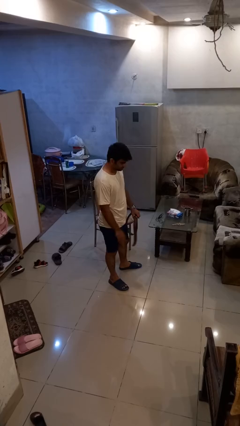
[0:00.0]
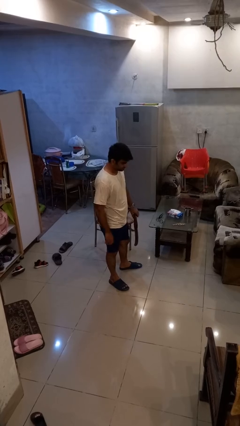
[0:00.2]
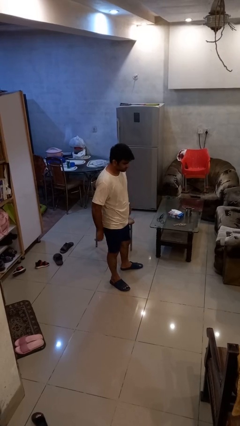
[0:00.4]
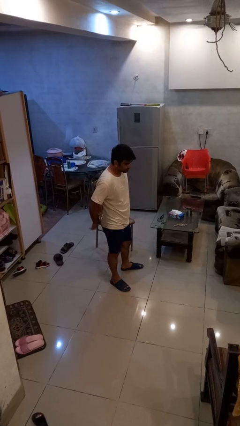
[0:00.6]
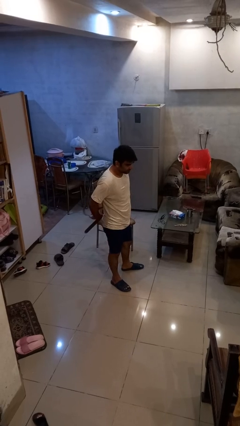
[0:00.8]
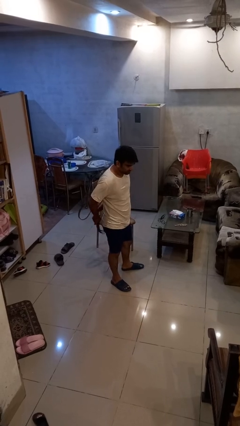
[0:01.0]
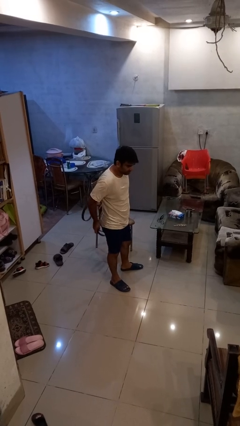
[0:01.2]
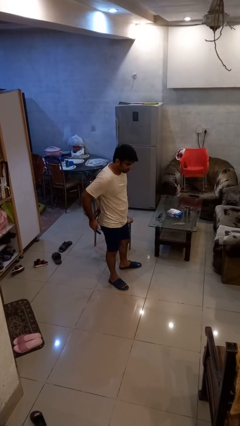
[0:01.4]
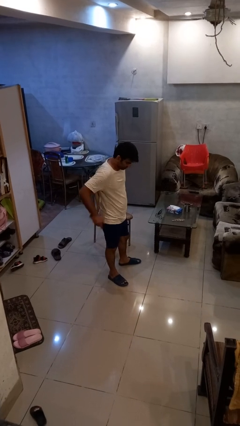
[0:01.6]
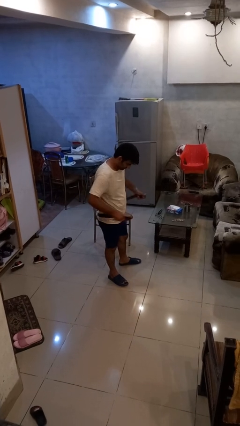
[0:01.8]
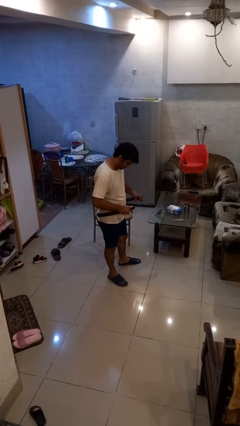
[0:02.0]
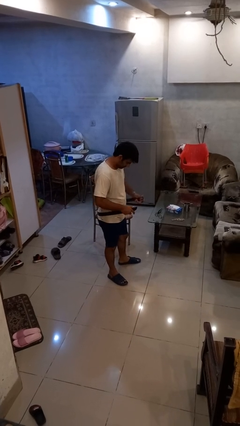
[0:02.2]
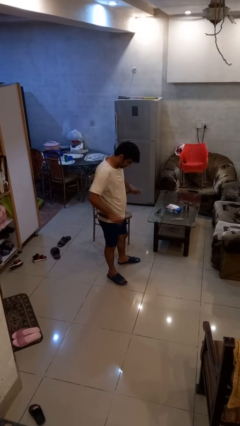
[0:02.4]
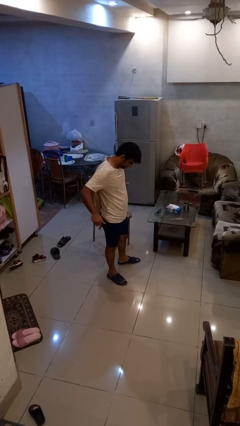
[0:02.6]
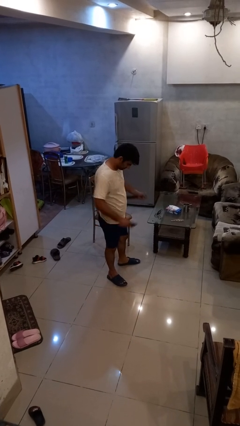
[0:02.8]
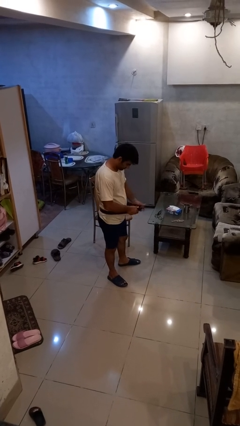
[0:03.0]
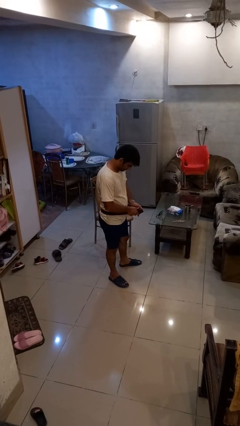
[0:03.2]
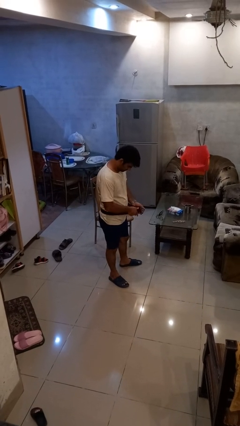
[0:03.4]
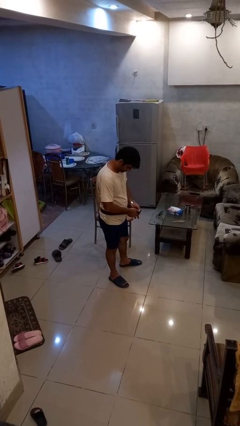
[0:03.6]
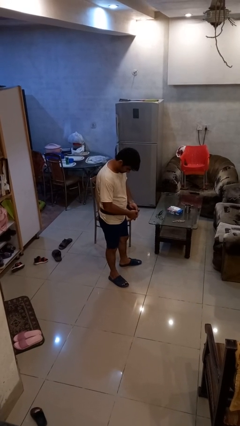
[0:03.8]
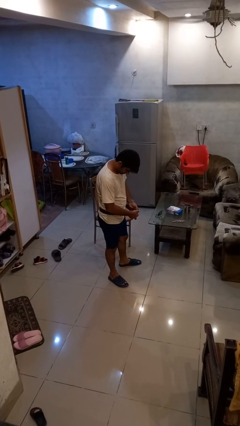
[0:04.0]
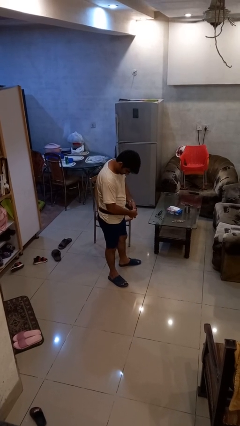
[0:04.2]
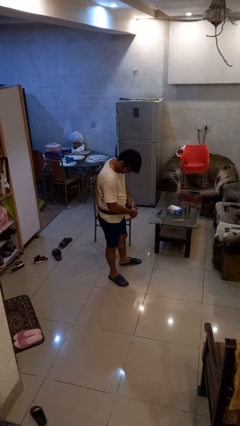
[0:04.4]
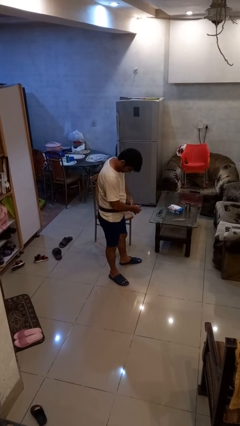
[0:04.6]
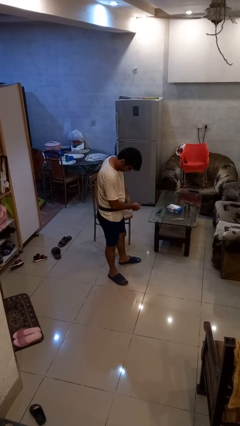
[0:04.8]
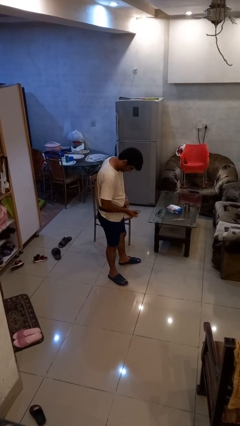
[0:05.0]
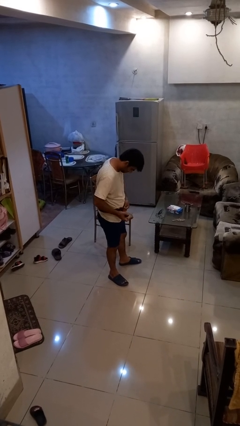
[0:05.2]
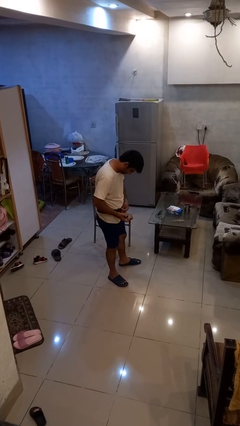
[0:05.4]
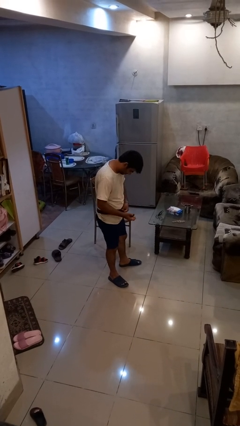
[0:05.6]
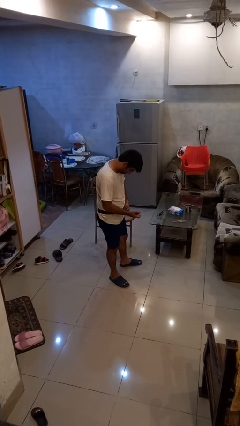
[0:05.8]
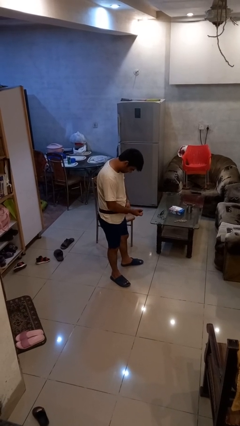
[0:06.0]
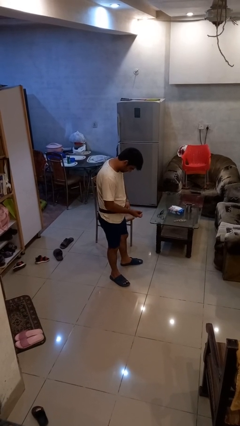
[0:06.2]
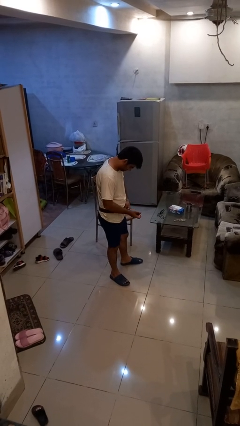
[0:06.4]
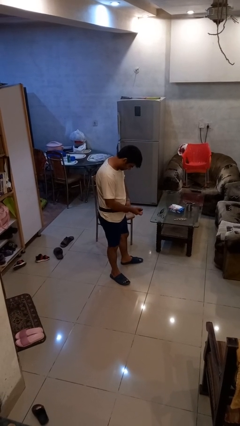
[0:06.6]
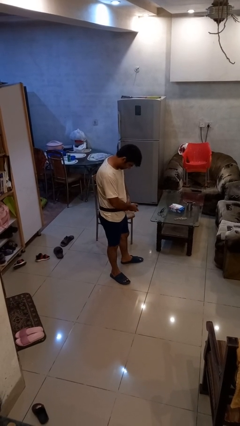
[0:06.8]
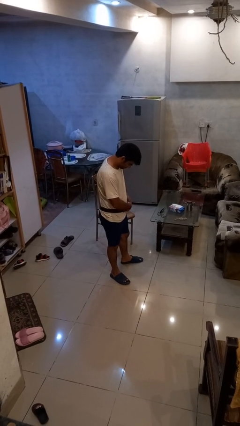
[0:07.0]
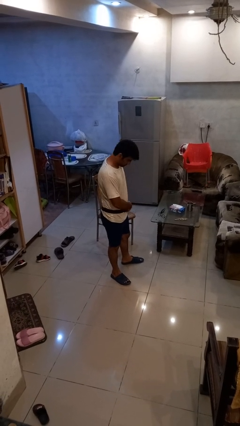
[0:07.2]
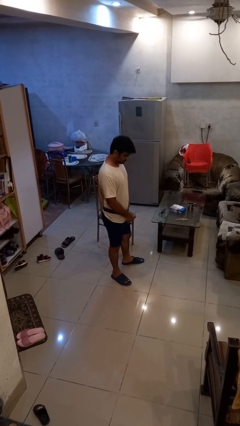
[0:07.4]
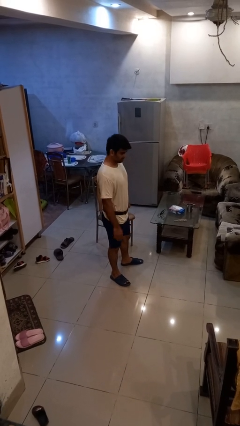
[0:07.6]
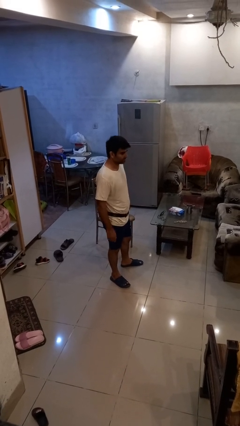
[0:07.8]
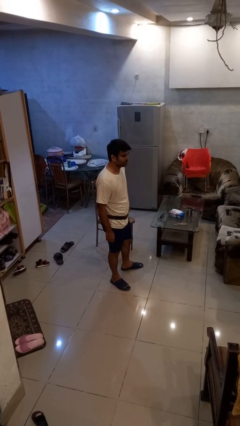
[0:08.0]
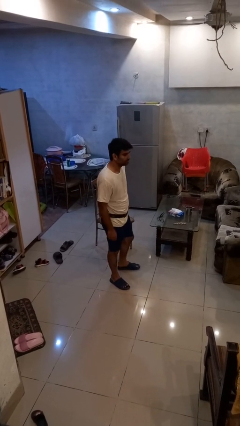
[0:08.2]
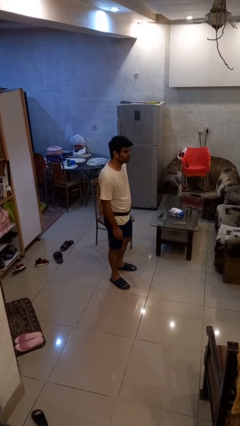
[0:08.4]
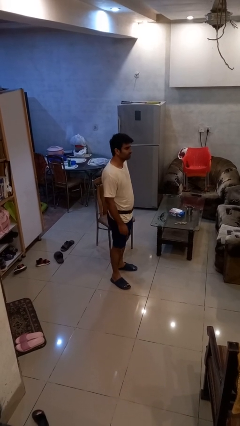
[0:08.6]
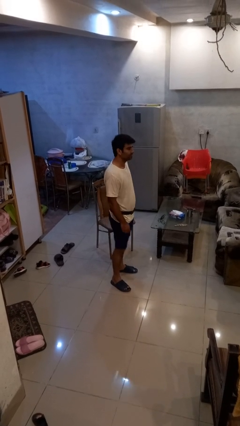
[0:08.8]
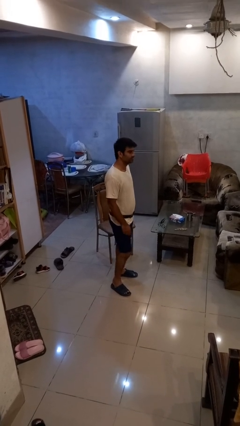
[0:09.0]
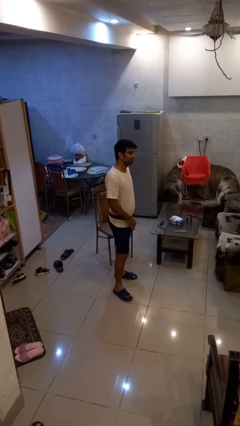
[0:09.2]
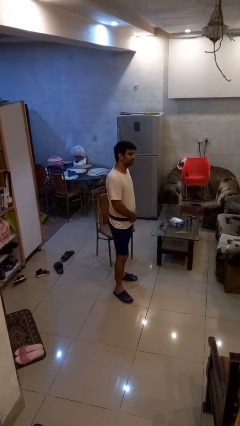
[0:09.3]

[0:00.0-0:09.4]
person puts on belt

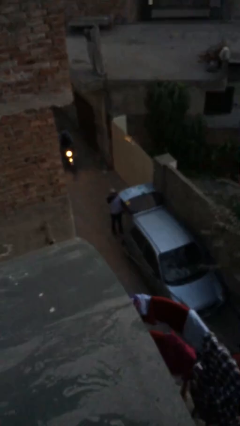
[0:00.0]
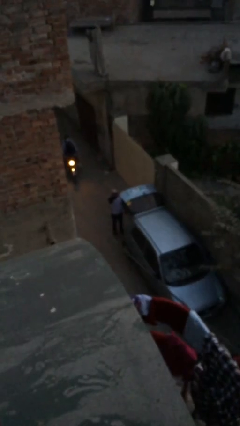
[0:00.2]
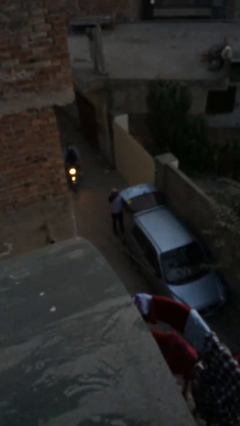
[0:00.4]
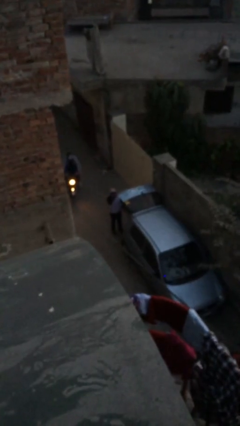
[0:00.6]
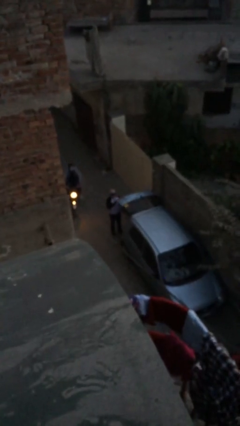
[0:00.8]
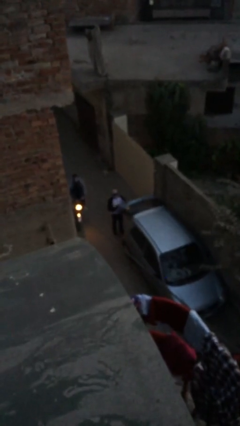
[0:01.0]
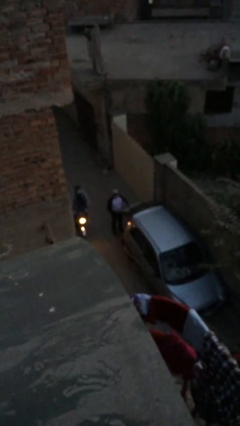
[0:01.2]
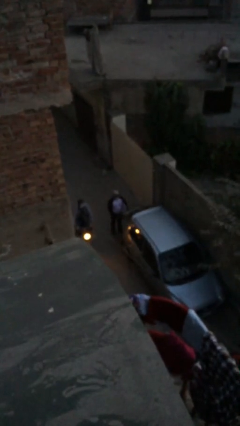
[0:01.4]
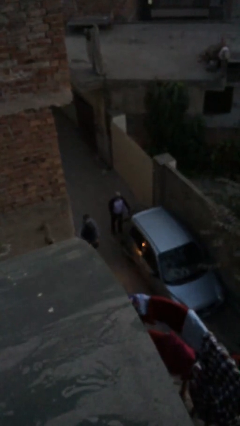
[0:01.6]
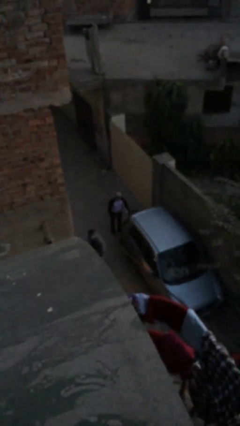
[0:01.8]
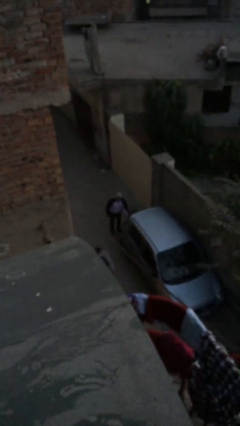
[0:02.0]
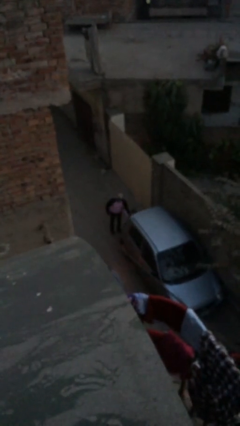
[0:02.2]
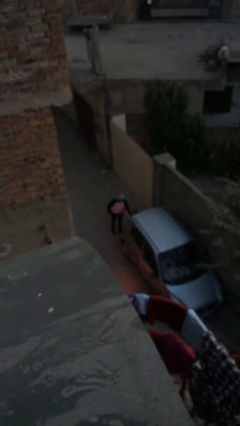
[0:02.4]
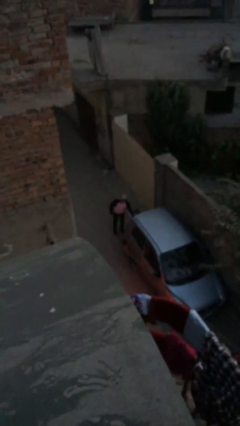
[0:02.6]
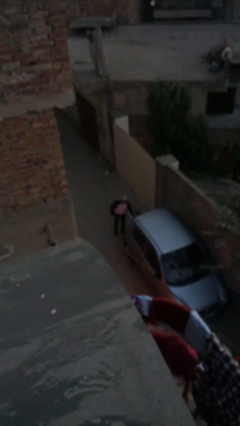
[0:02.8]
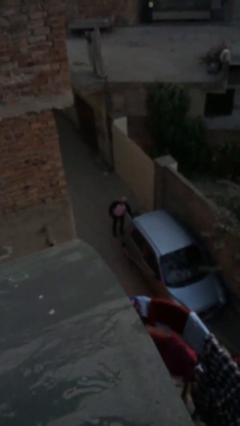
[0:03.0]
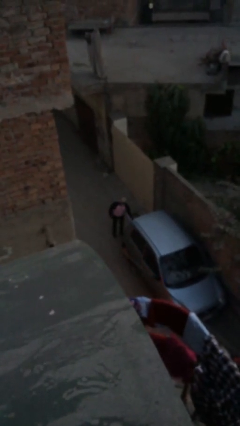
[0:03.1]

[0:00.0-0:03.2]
person closes car trunk

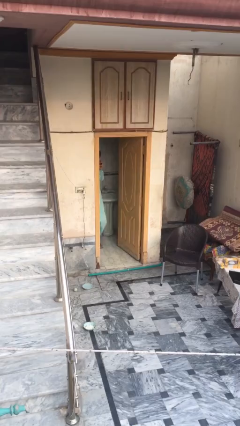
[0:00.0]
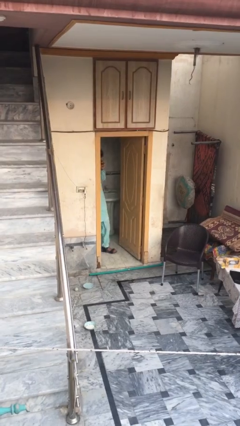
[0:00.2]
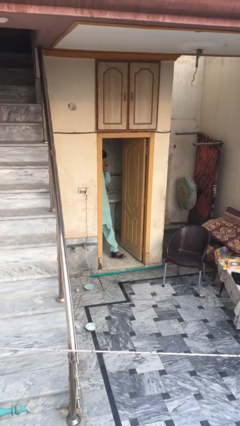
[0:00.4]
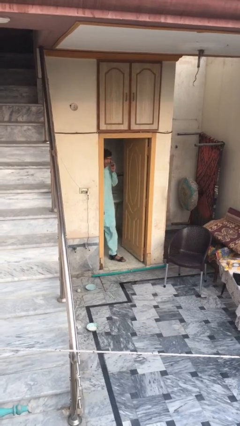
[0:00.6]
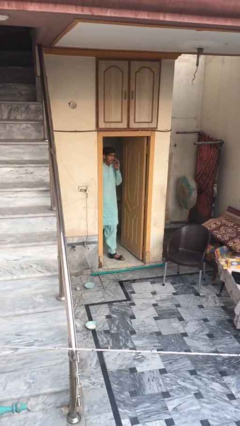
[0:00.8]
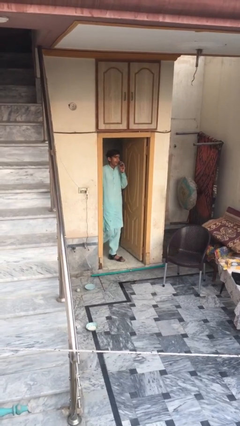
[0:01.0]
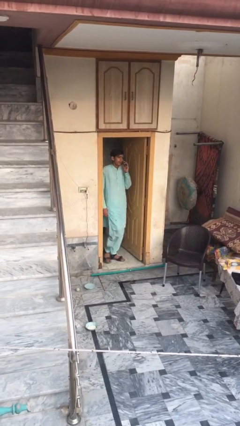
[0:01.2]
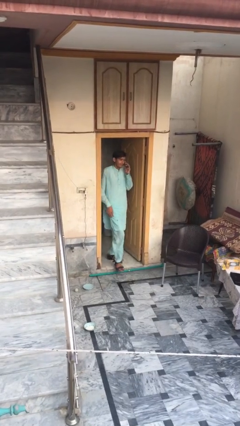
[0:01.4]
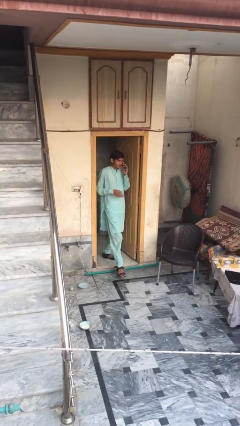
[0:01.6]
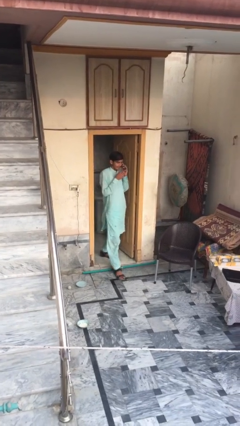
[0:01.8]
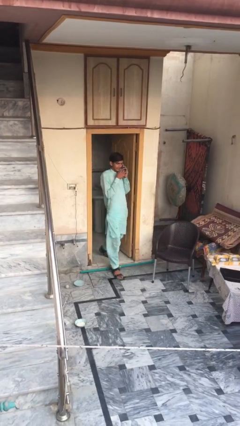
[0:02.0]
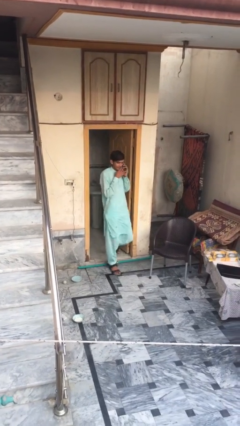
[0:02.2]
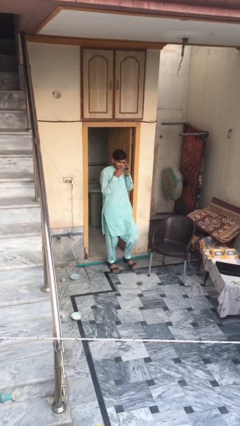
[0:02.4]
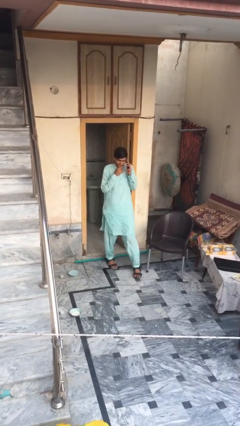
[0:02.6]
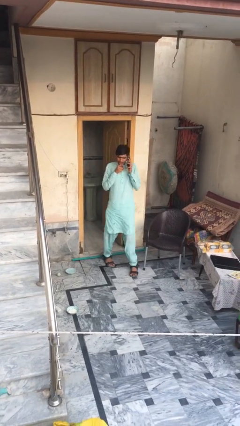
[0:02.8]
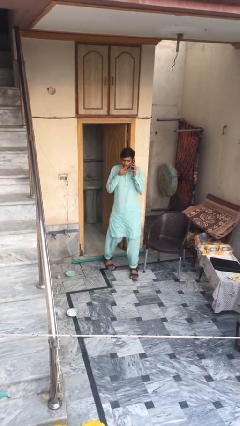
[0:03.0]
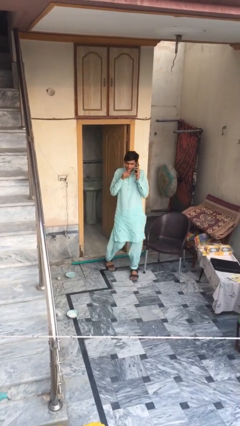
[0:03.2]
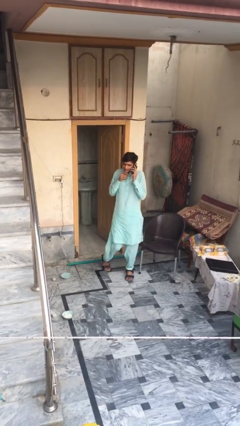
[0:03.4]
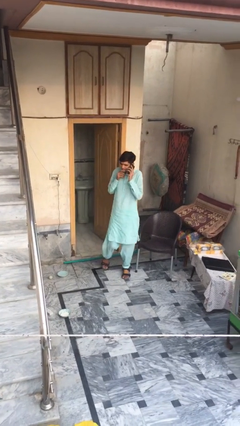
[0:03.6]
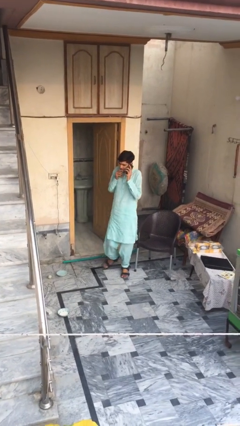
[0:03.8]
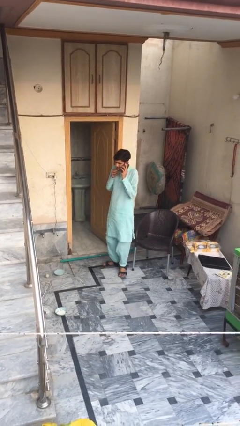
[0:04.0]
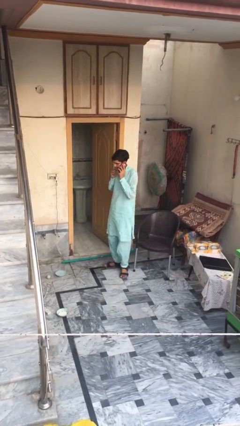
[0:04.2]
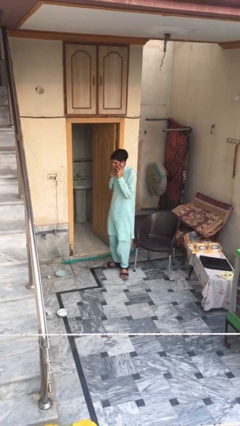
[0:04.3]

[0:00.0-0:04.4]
person enters scene through structure

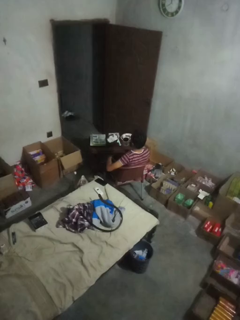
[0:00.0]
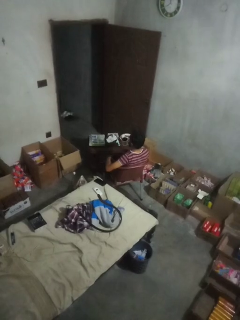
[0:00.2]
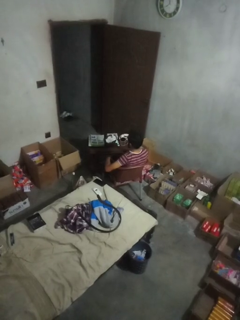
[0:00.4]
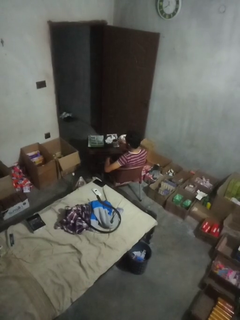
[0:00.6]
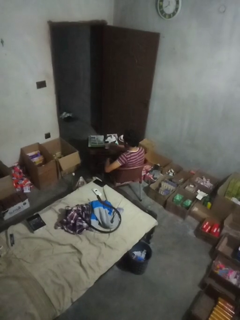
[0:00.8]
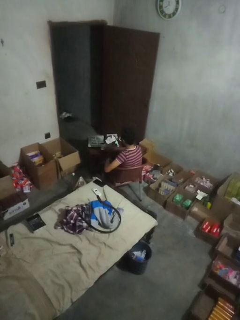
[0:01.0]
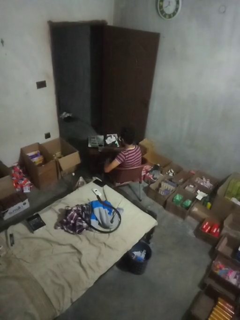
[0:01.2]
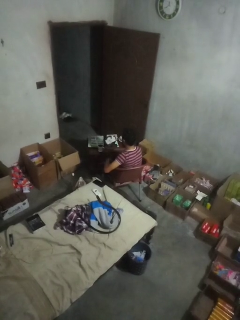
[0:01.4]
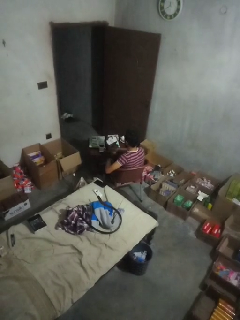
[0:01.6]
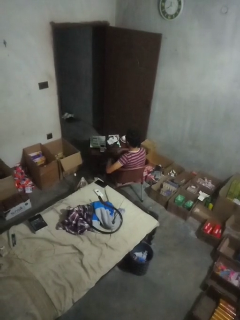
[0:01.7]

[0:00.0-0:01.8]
person puts down object on table
